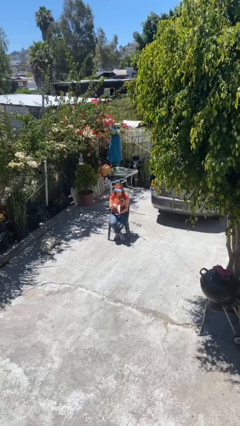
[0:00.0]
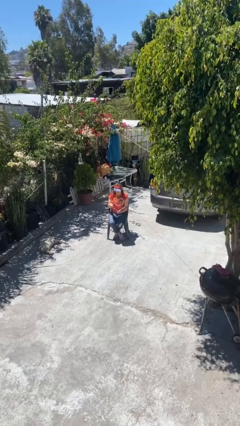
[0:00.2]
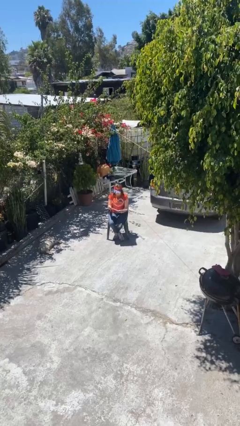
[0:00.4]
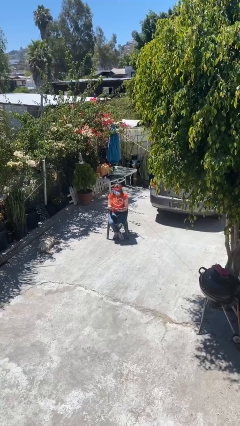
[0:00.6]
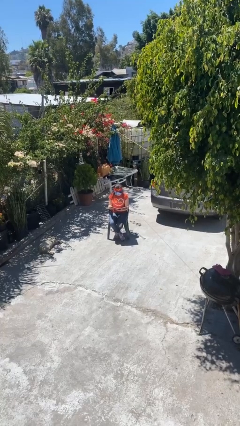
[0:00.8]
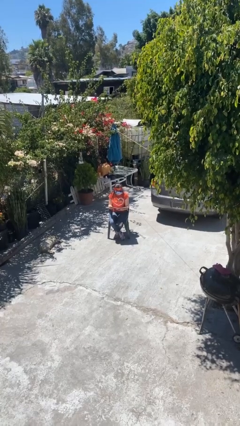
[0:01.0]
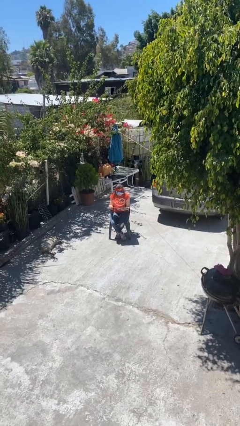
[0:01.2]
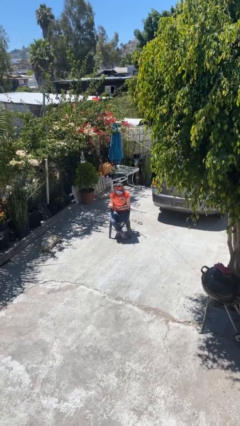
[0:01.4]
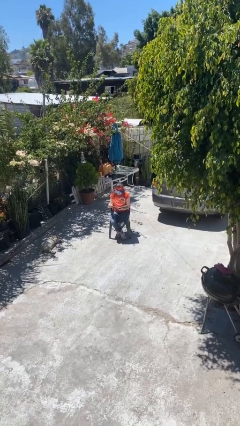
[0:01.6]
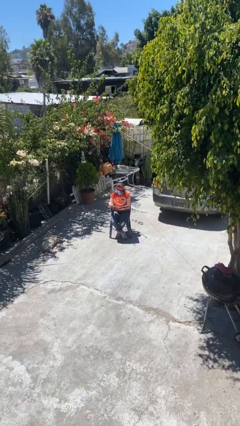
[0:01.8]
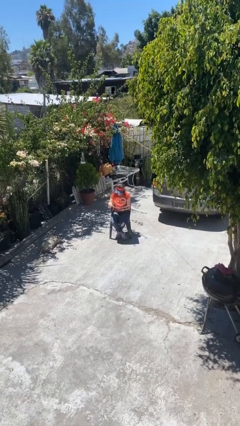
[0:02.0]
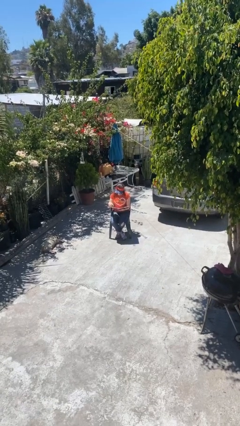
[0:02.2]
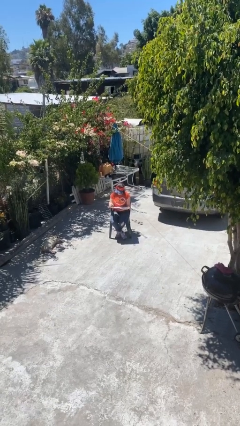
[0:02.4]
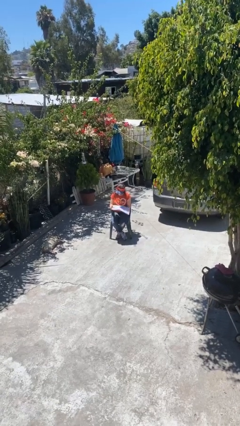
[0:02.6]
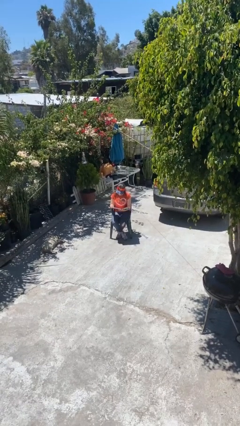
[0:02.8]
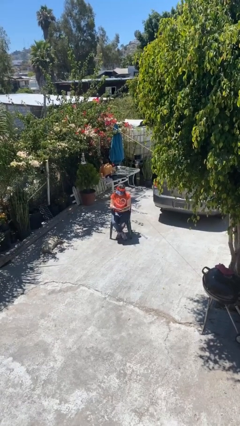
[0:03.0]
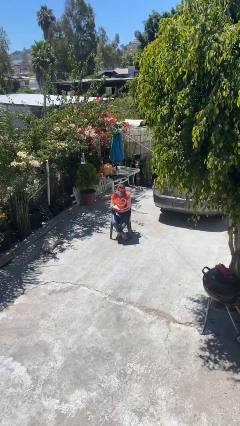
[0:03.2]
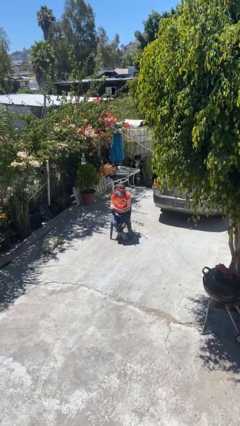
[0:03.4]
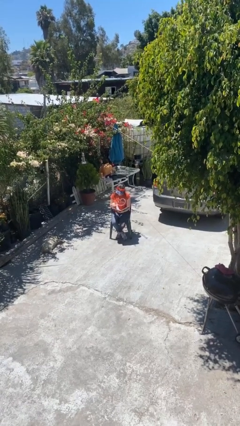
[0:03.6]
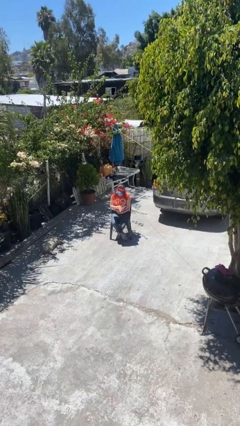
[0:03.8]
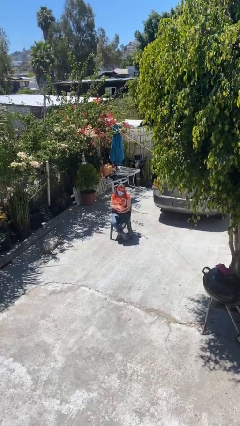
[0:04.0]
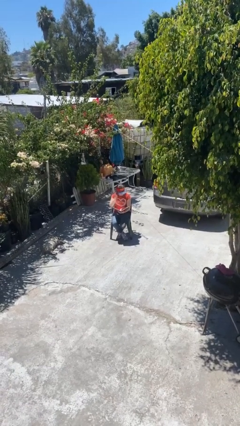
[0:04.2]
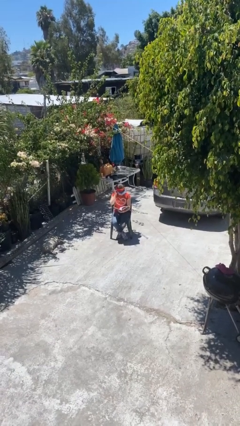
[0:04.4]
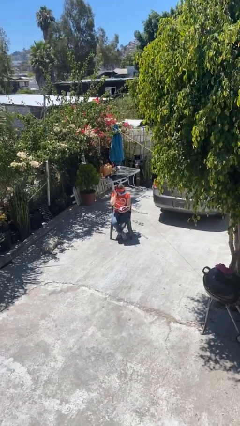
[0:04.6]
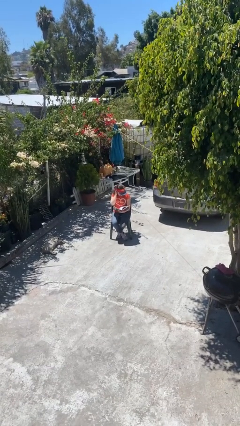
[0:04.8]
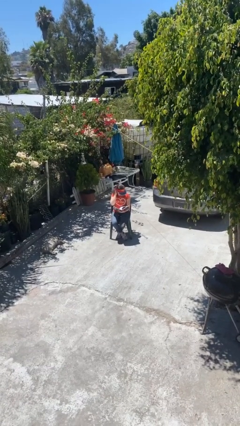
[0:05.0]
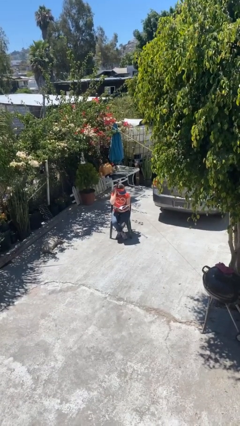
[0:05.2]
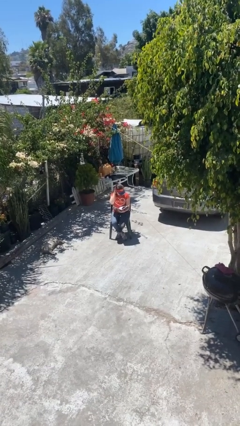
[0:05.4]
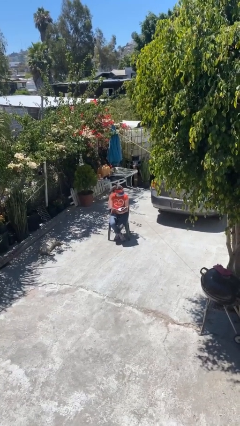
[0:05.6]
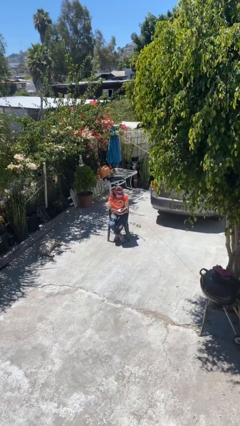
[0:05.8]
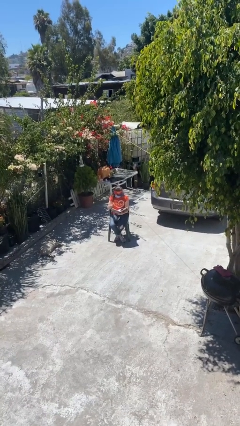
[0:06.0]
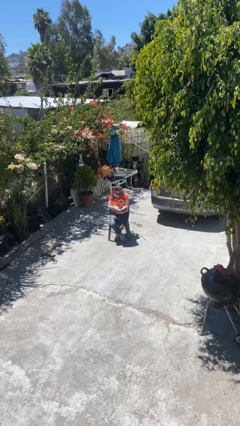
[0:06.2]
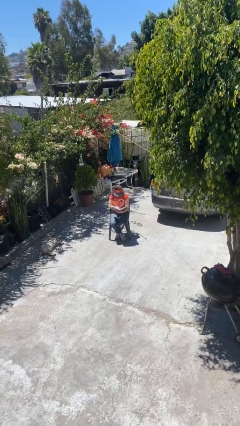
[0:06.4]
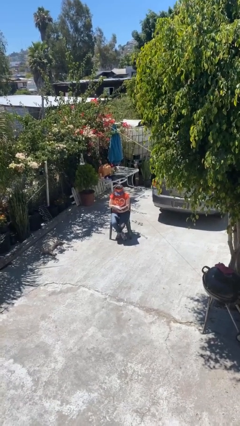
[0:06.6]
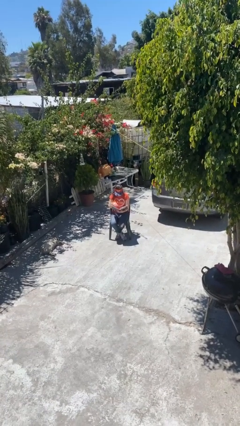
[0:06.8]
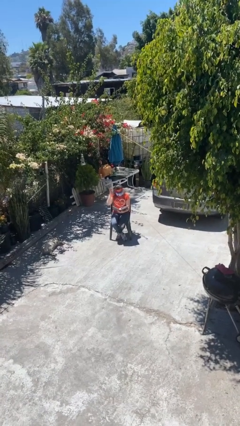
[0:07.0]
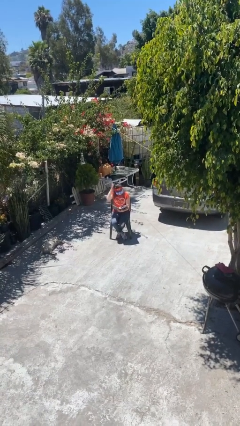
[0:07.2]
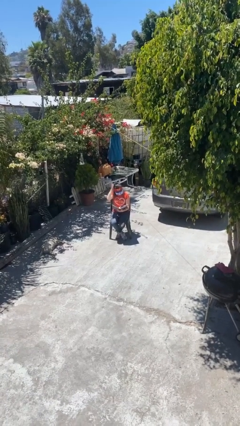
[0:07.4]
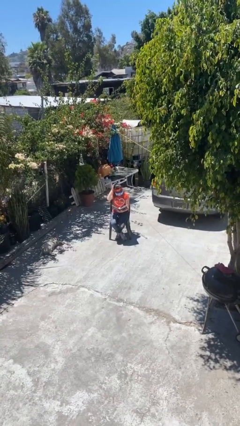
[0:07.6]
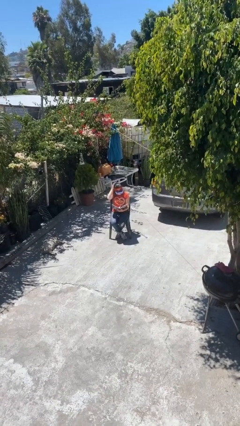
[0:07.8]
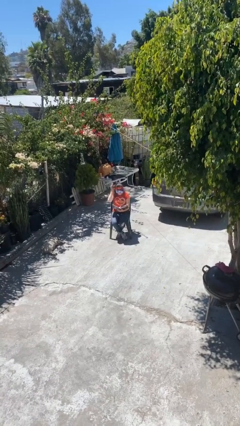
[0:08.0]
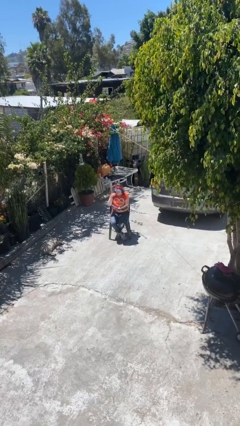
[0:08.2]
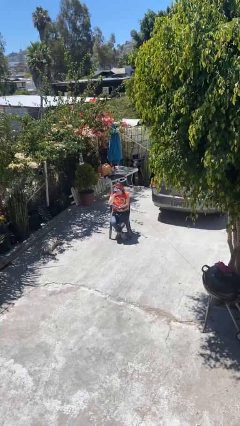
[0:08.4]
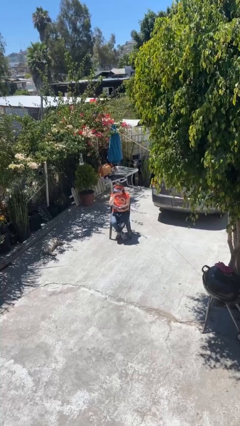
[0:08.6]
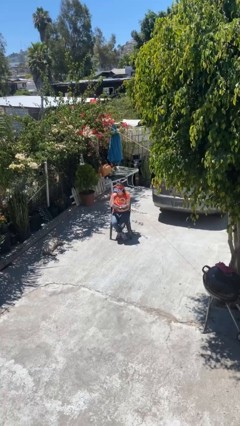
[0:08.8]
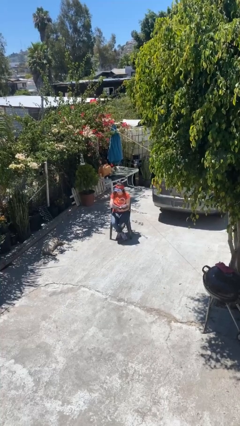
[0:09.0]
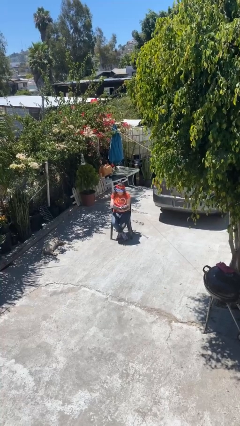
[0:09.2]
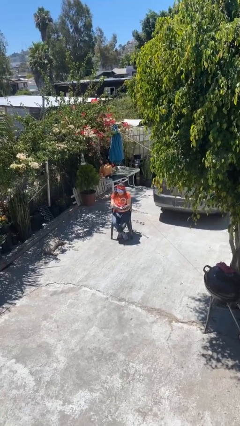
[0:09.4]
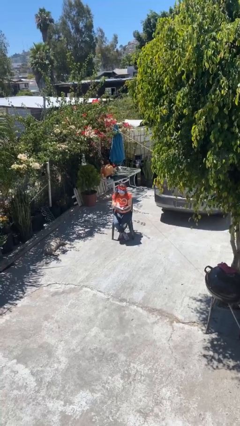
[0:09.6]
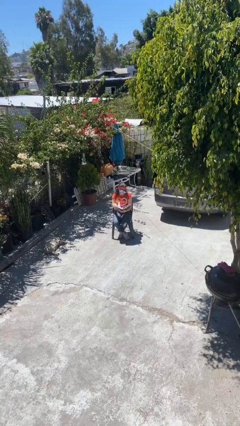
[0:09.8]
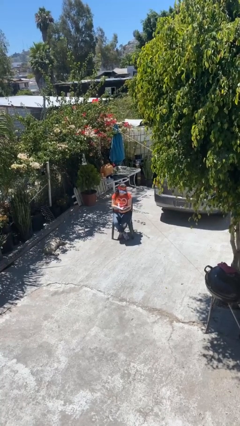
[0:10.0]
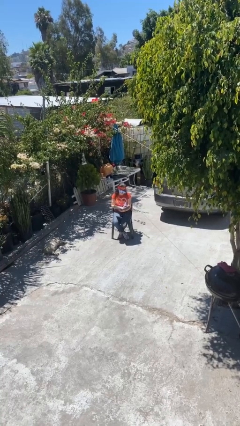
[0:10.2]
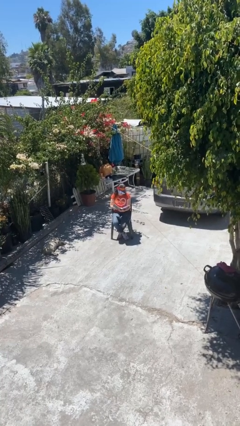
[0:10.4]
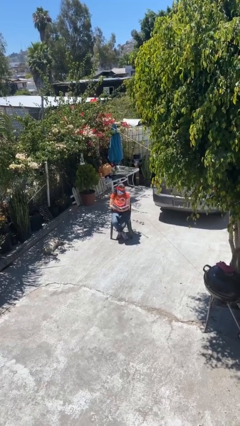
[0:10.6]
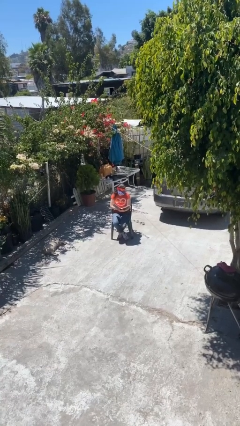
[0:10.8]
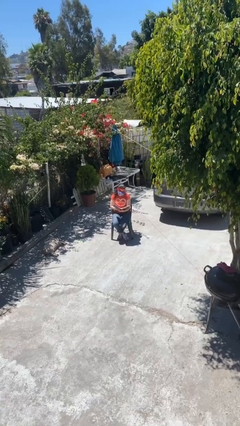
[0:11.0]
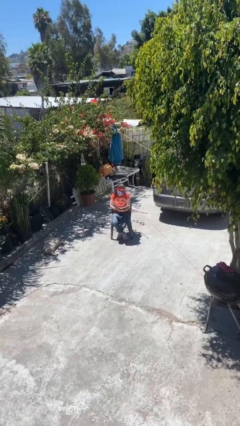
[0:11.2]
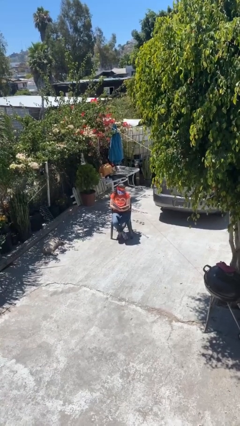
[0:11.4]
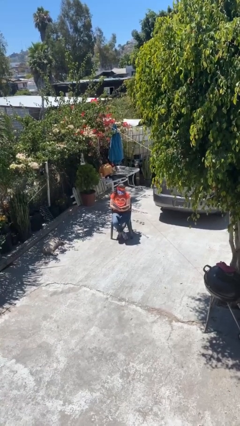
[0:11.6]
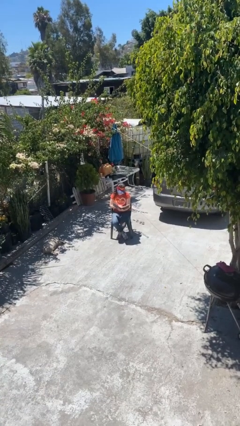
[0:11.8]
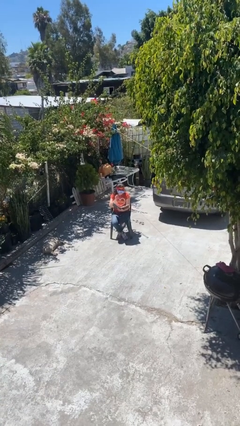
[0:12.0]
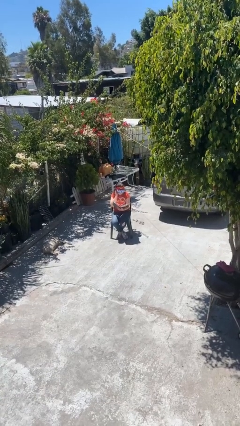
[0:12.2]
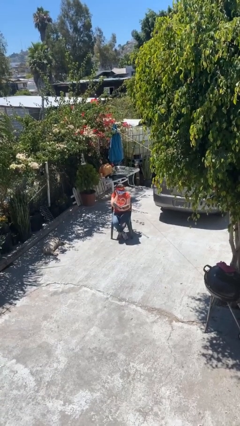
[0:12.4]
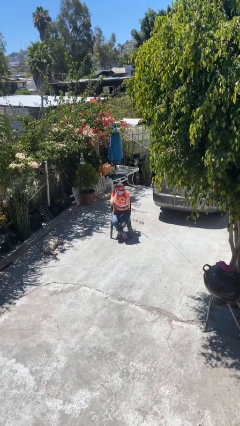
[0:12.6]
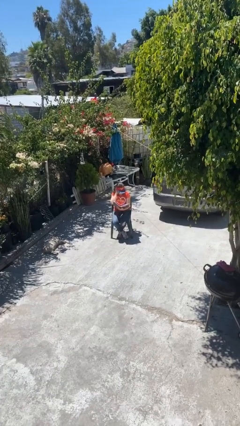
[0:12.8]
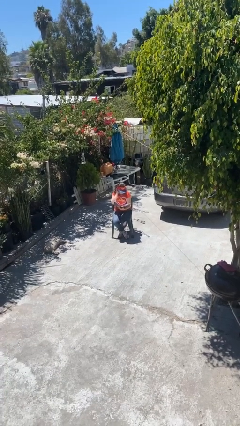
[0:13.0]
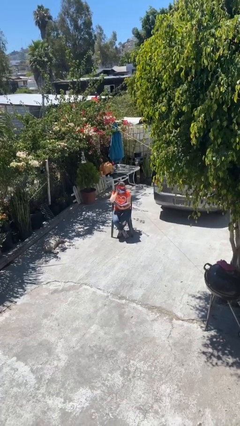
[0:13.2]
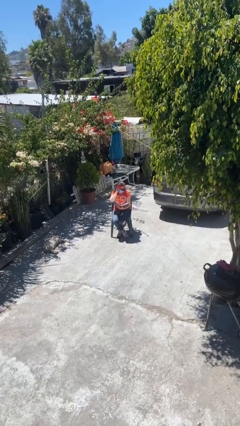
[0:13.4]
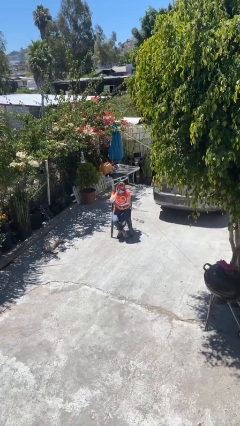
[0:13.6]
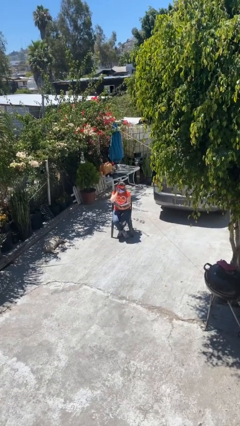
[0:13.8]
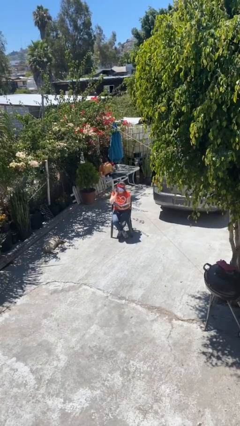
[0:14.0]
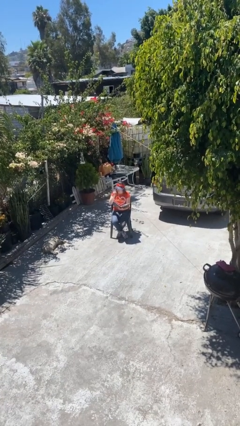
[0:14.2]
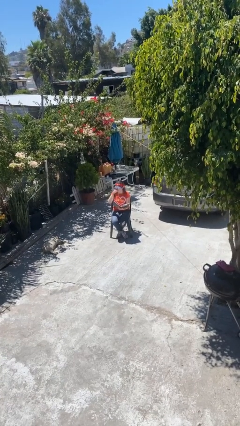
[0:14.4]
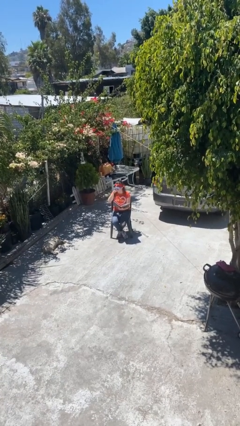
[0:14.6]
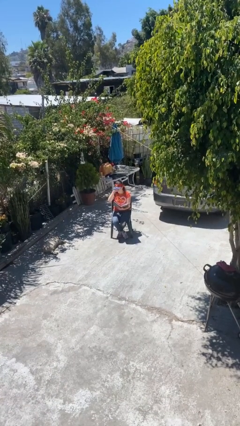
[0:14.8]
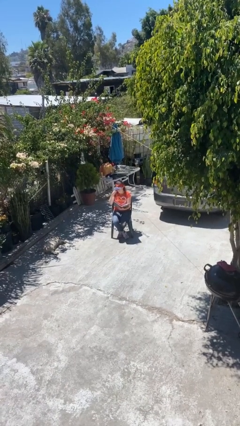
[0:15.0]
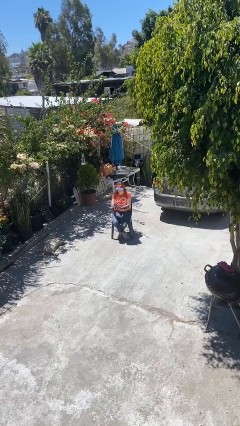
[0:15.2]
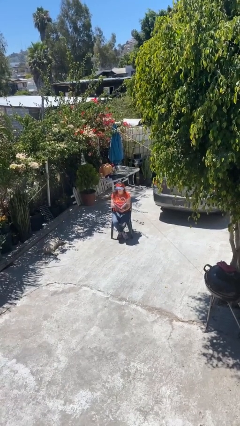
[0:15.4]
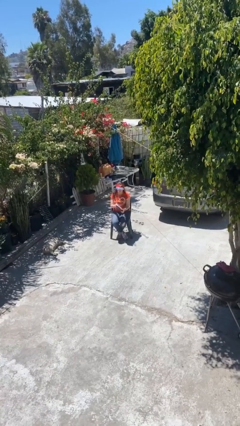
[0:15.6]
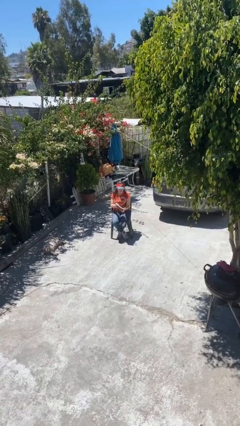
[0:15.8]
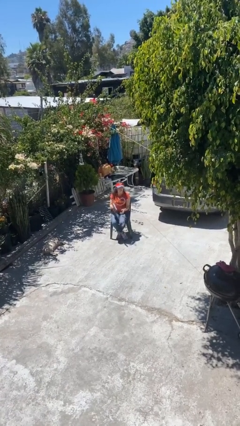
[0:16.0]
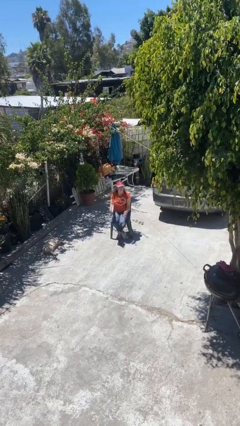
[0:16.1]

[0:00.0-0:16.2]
person reads document

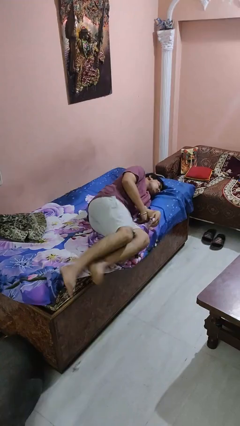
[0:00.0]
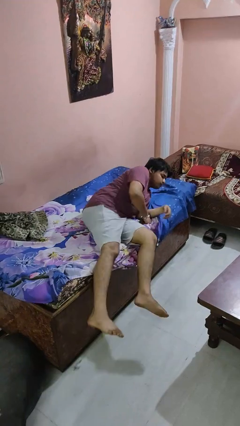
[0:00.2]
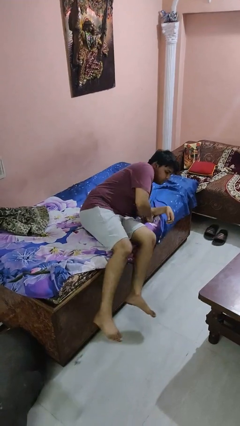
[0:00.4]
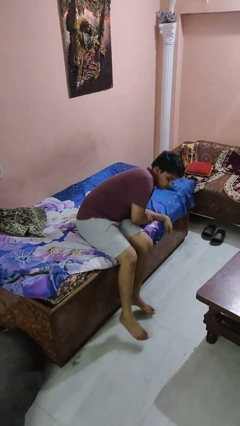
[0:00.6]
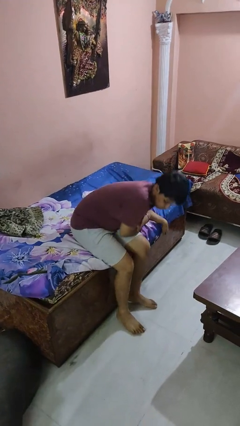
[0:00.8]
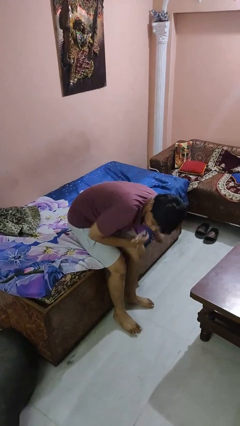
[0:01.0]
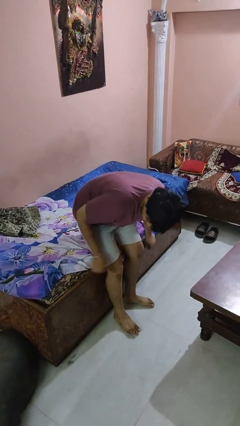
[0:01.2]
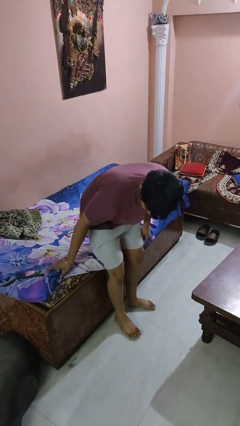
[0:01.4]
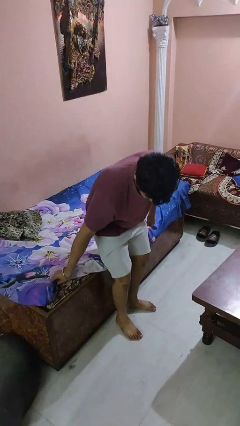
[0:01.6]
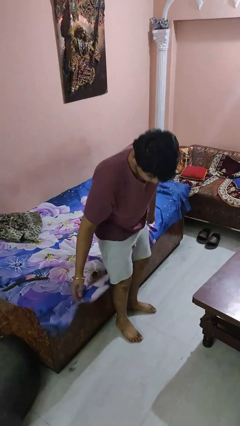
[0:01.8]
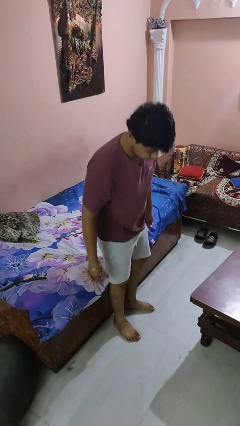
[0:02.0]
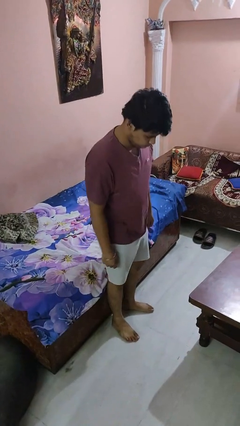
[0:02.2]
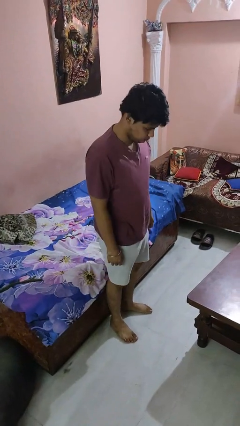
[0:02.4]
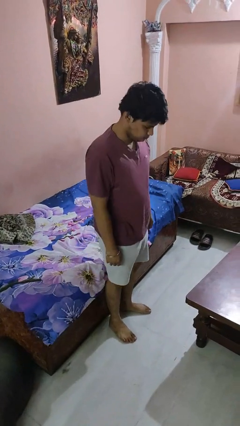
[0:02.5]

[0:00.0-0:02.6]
person stands up
